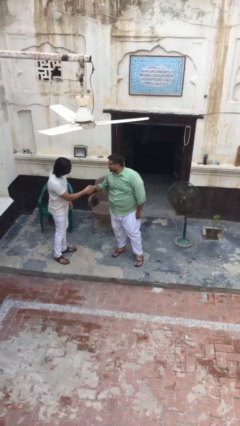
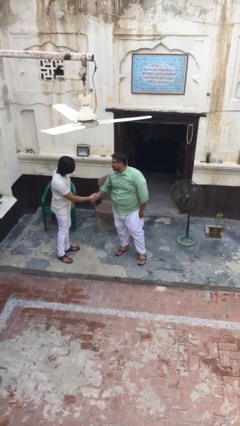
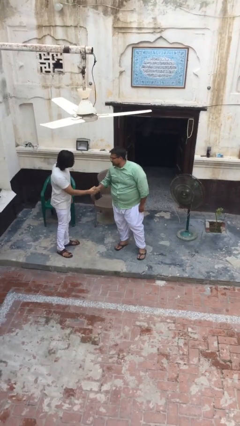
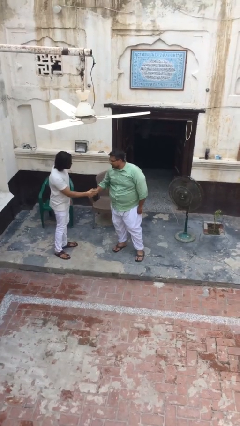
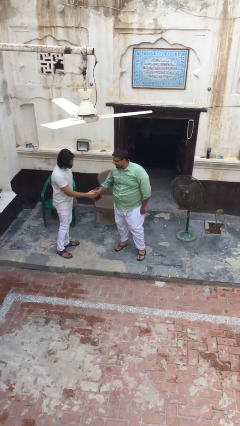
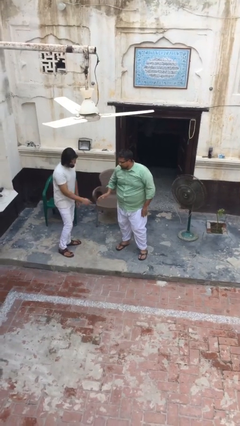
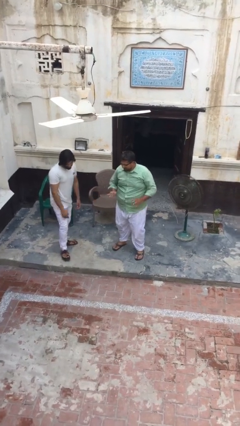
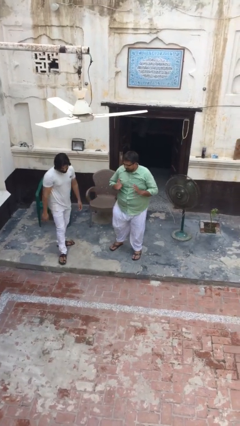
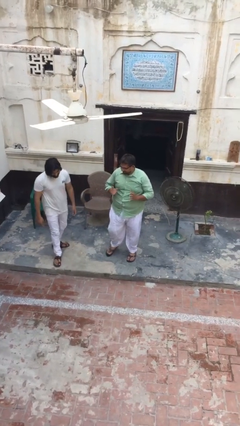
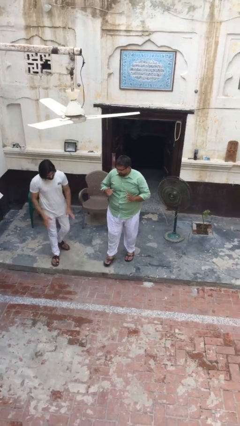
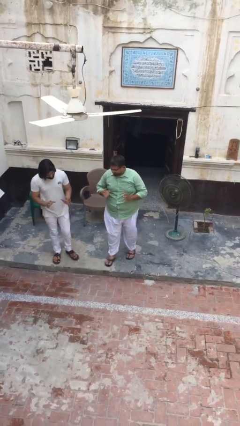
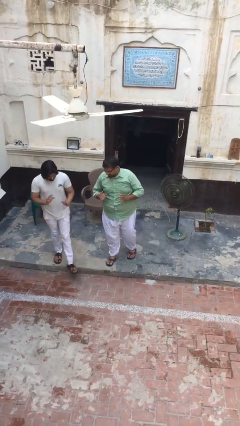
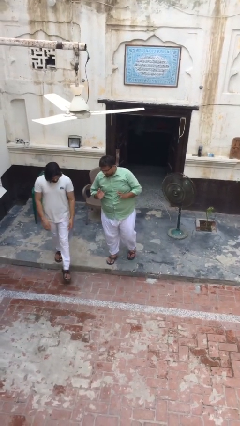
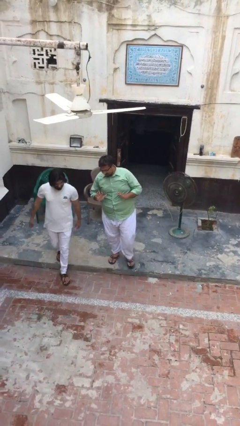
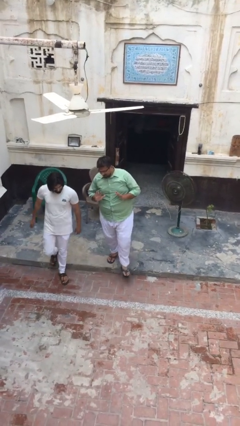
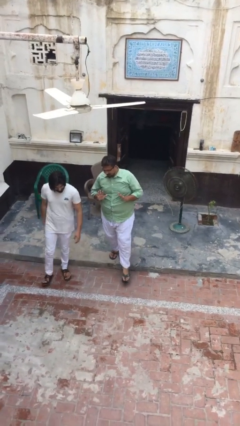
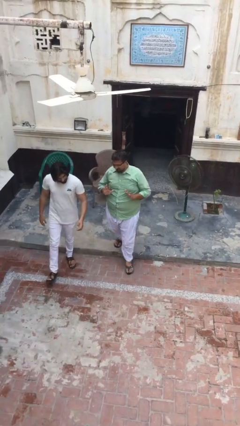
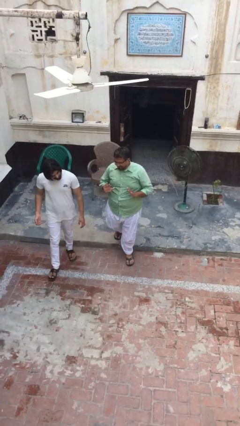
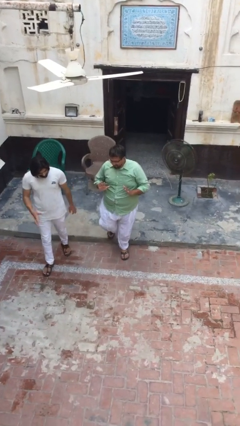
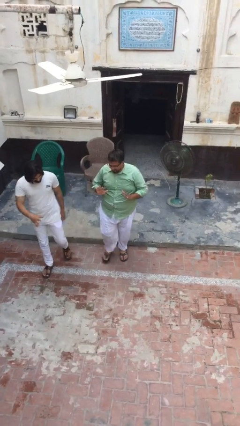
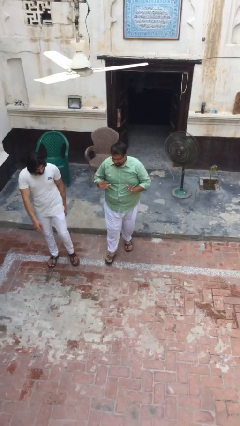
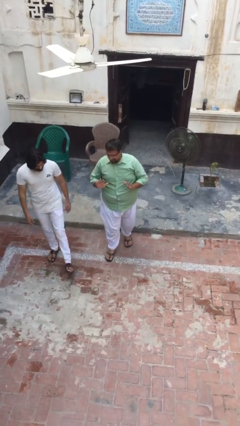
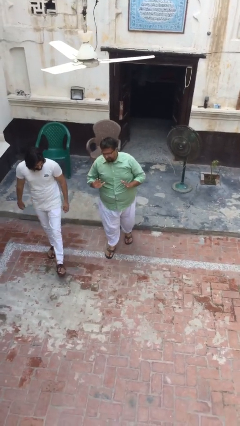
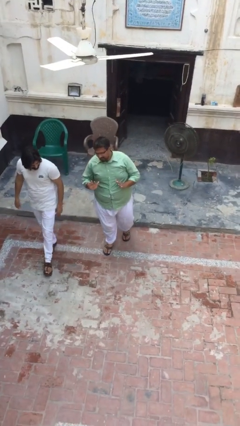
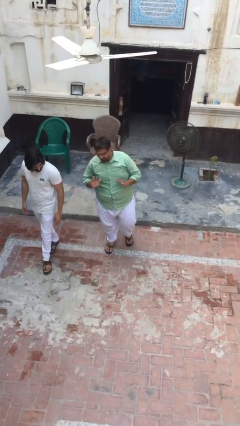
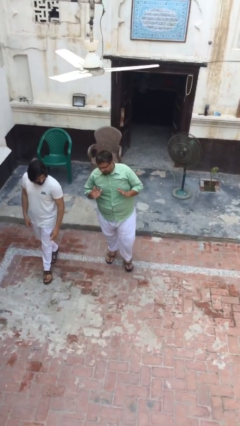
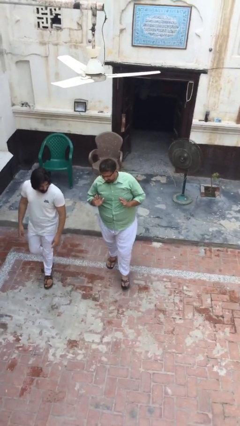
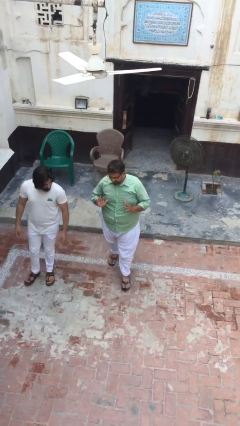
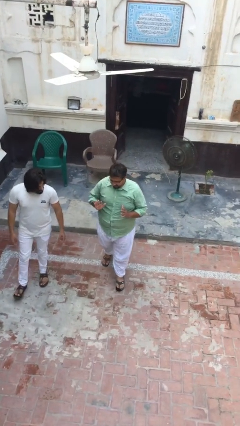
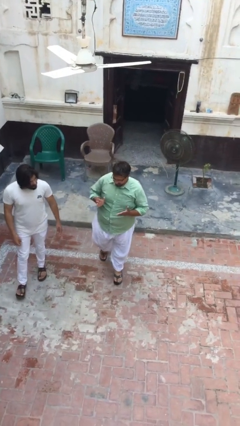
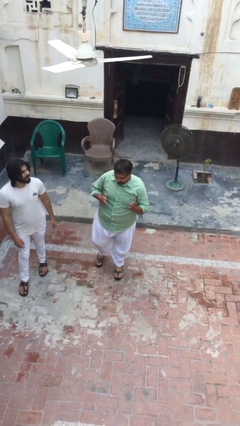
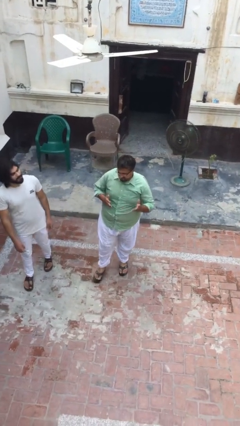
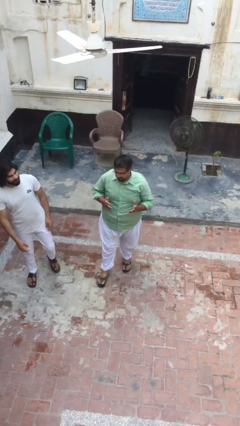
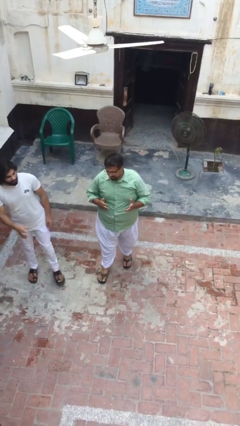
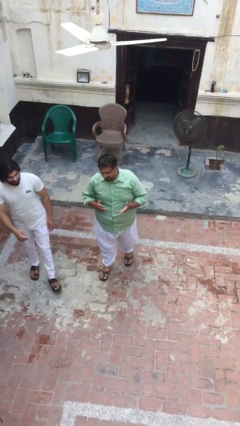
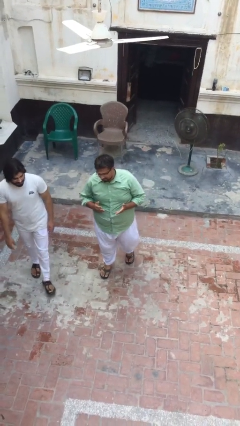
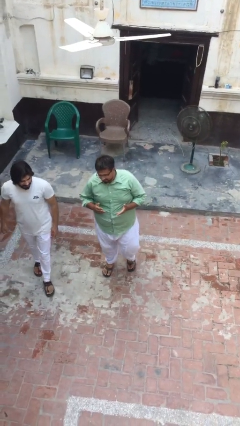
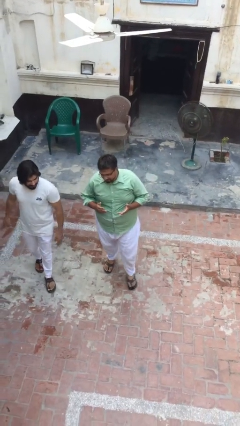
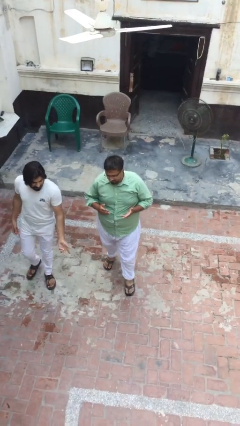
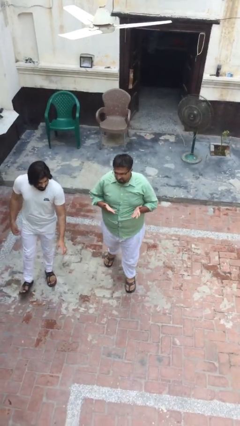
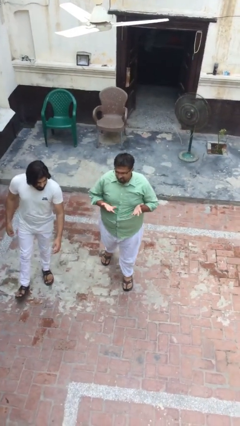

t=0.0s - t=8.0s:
person talks to person

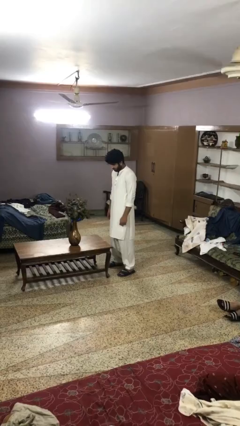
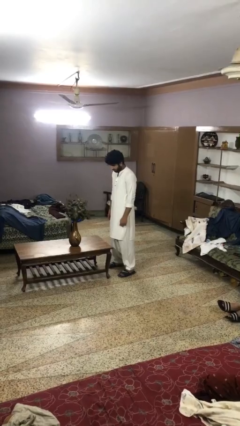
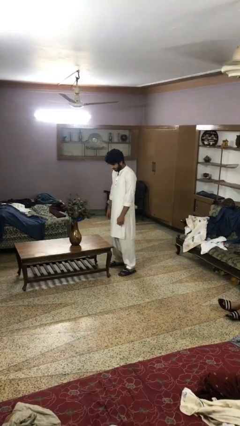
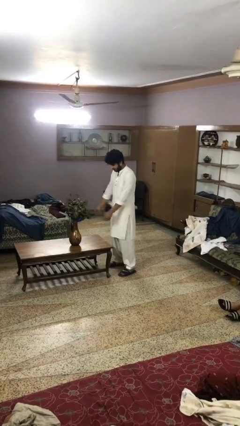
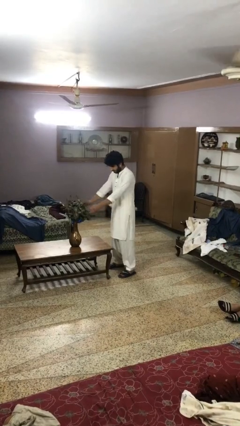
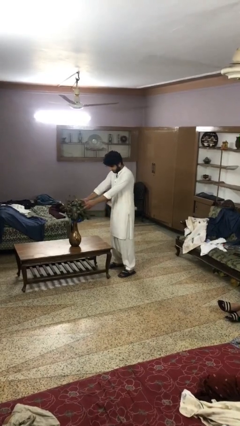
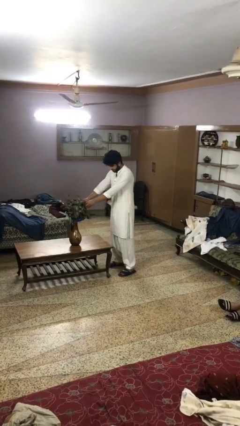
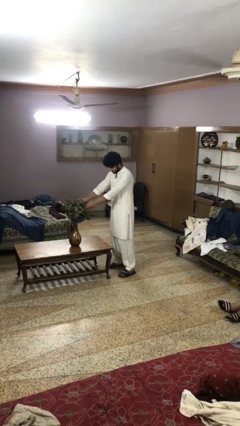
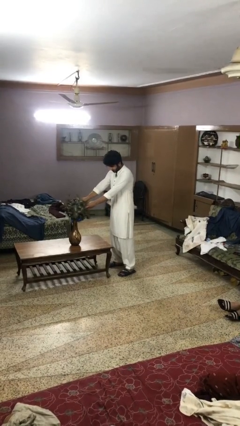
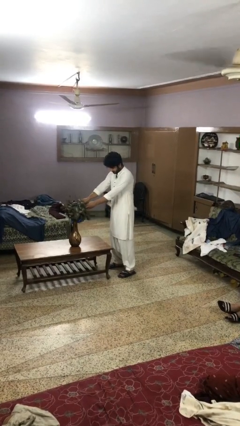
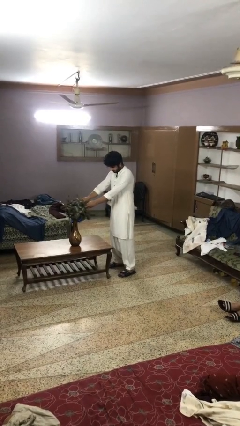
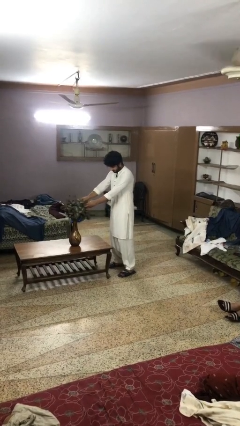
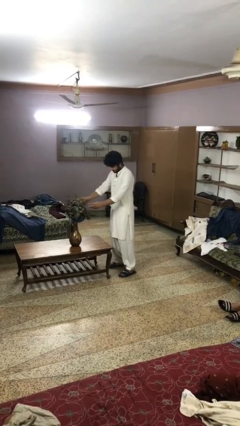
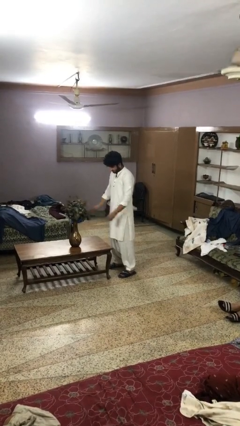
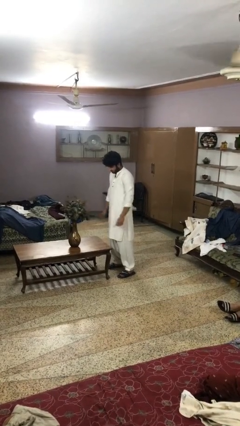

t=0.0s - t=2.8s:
person arranges flowers in vase

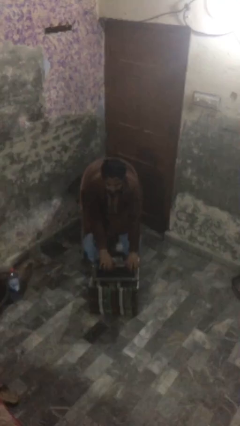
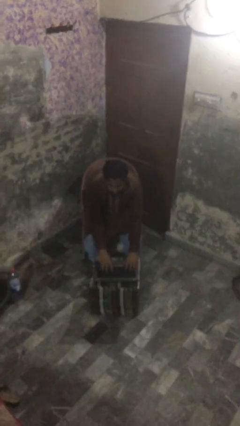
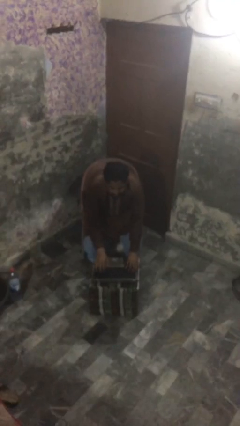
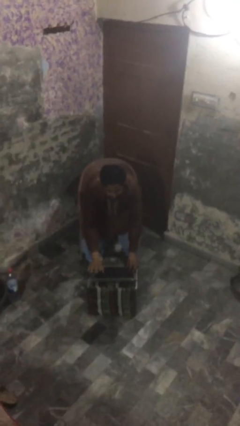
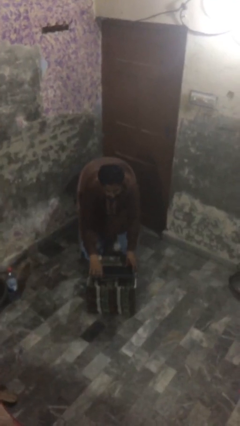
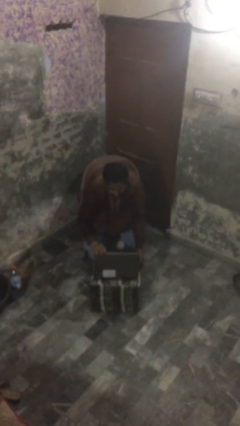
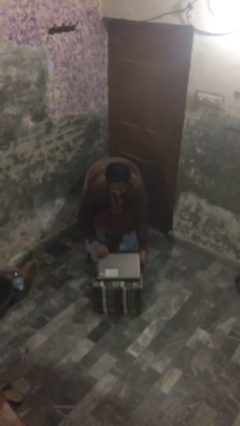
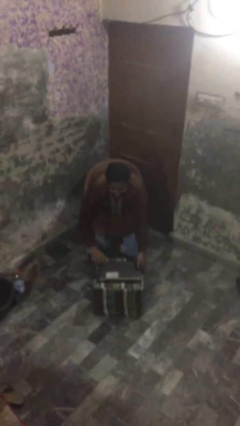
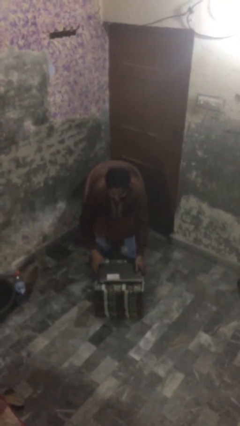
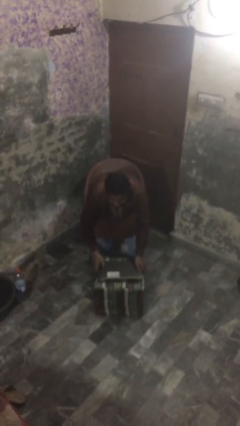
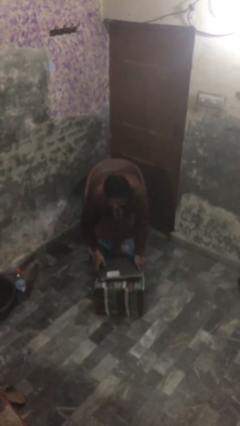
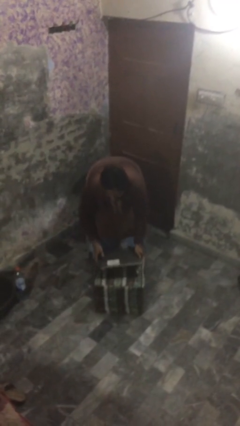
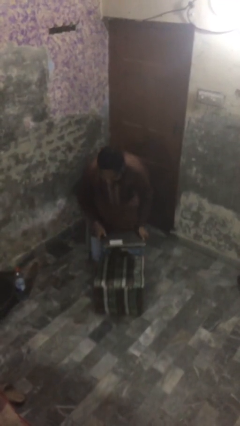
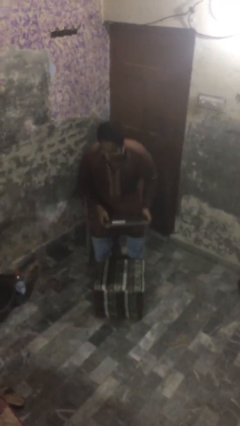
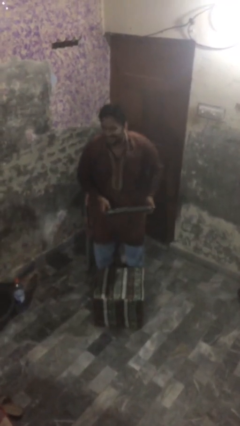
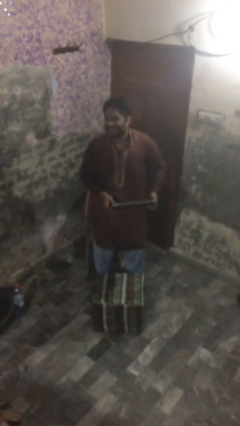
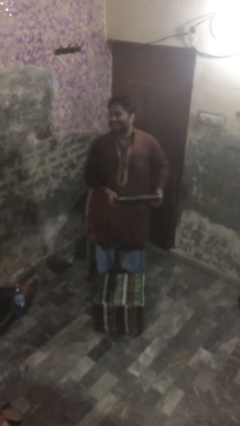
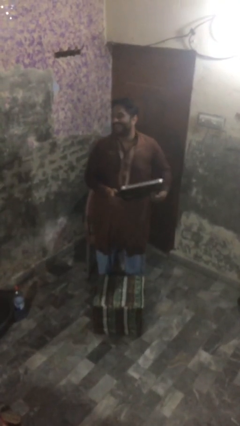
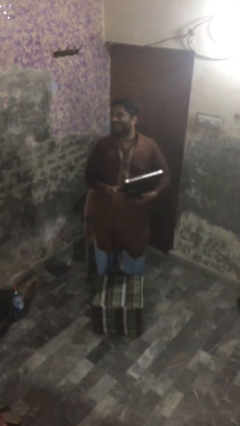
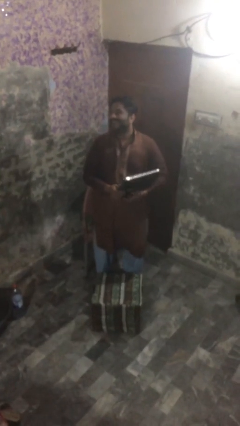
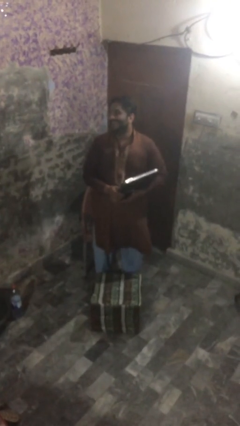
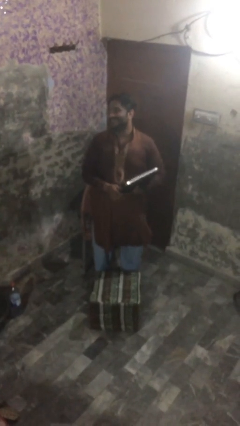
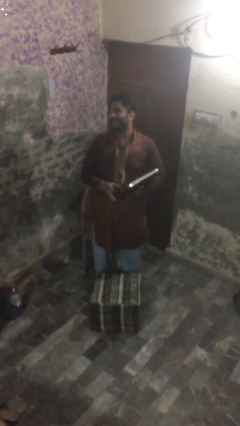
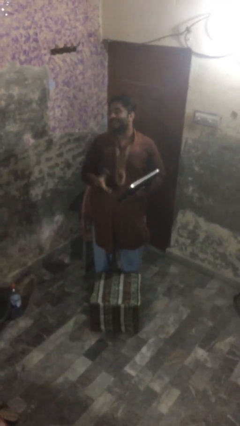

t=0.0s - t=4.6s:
person stands up

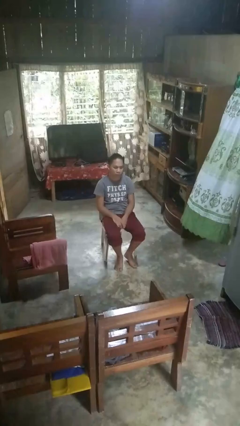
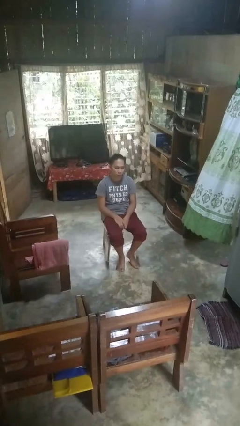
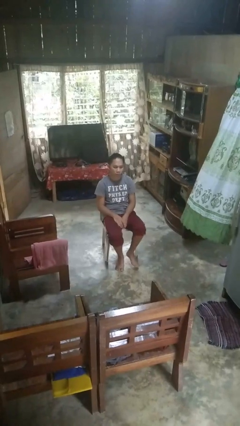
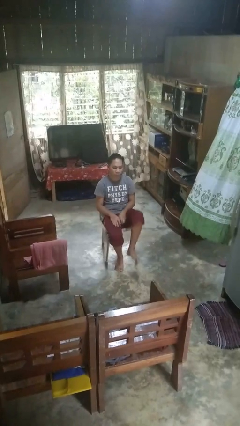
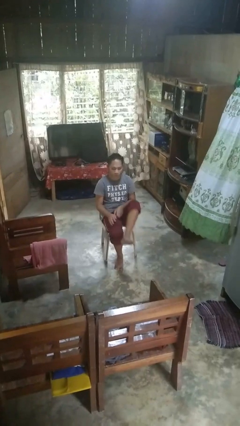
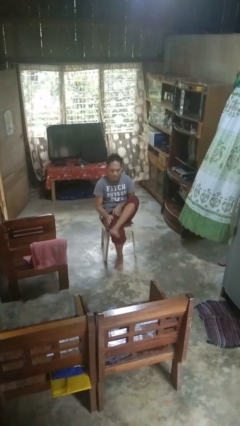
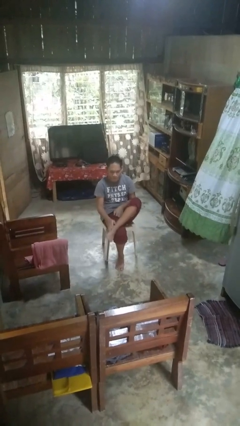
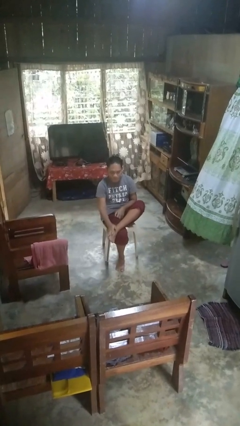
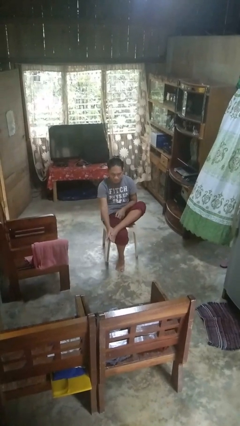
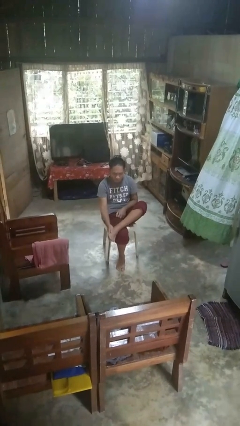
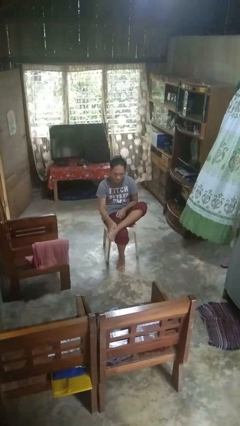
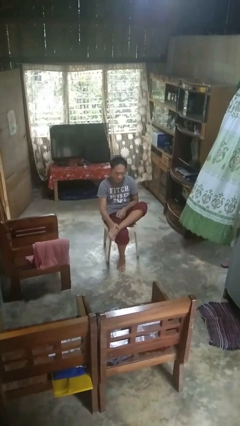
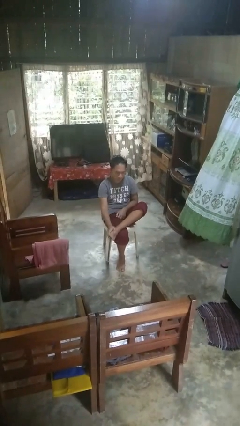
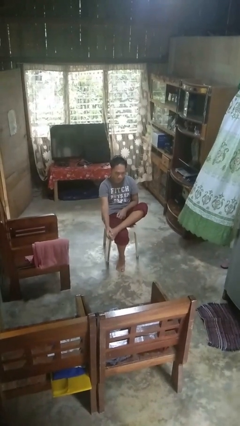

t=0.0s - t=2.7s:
person rubs foot
